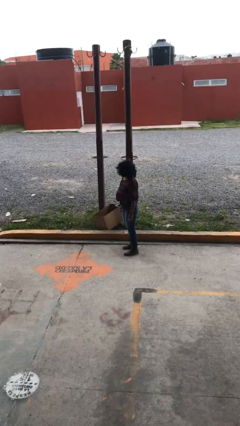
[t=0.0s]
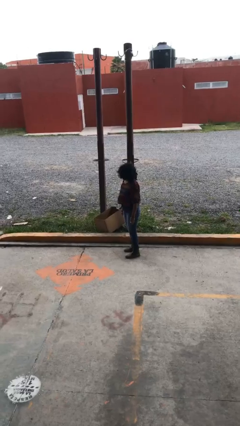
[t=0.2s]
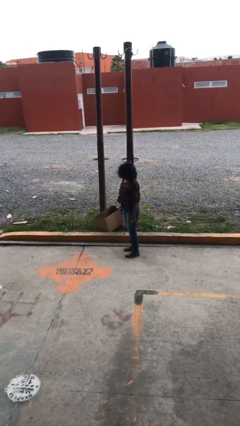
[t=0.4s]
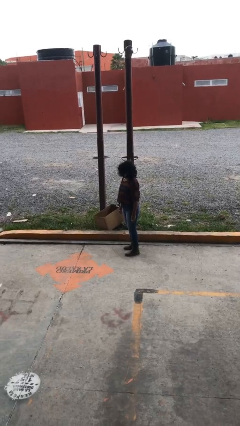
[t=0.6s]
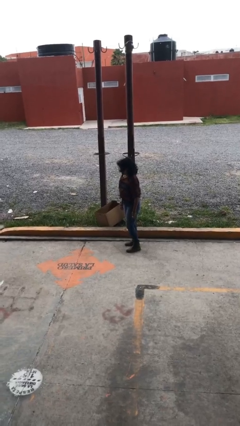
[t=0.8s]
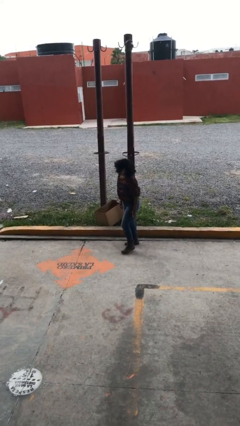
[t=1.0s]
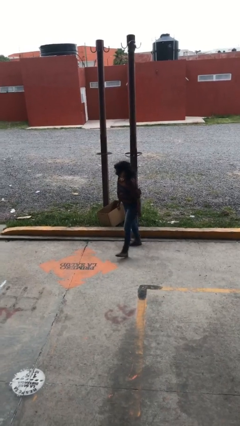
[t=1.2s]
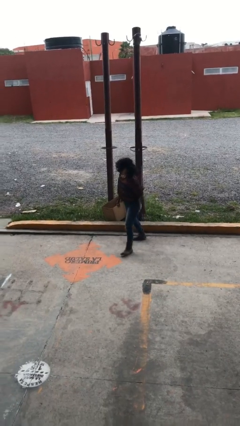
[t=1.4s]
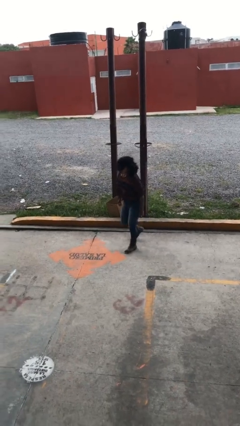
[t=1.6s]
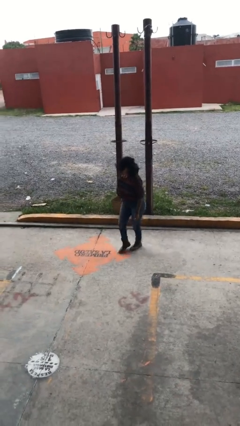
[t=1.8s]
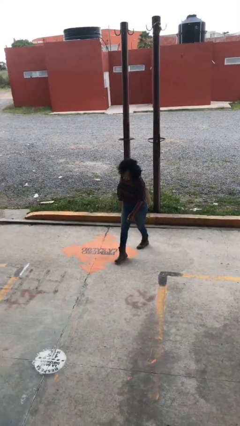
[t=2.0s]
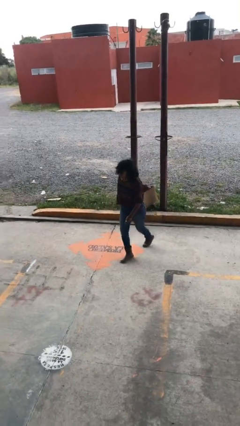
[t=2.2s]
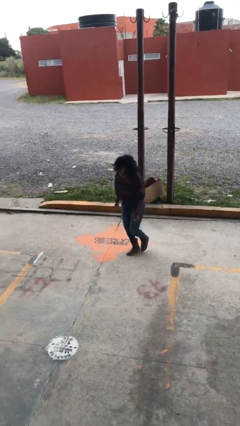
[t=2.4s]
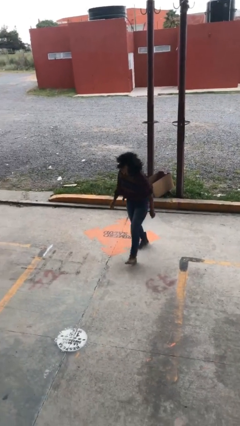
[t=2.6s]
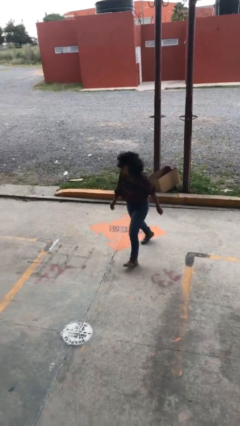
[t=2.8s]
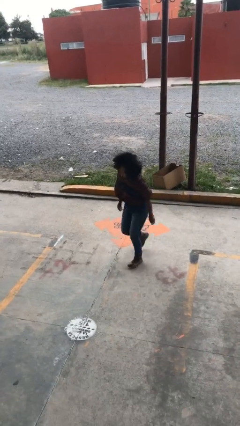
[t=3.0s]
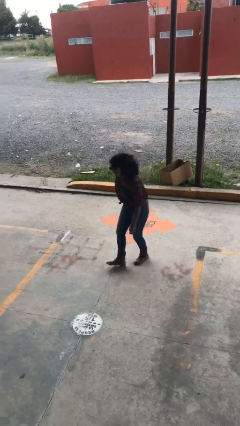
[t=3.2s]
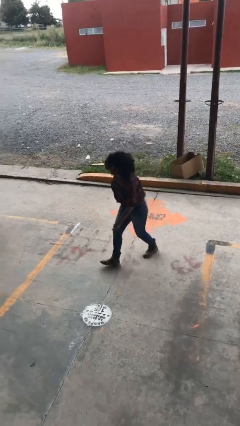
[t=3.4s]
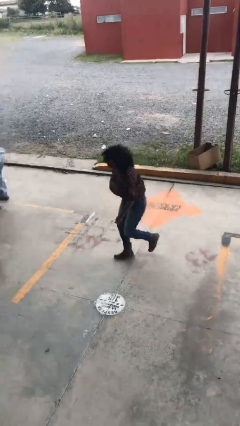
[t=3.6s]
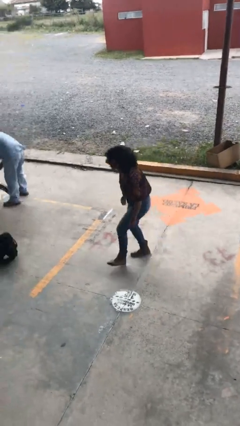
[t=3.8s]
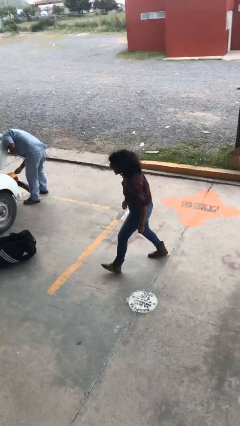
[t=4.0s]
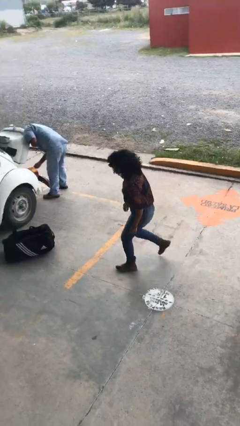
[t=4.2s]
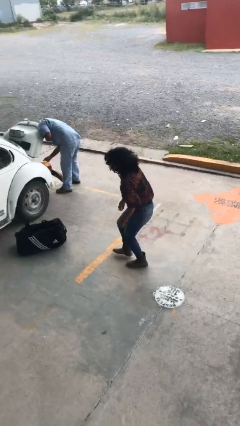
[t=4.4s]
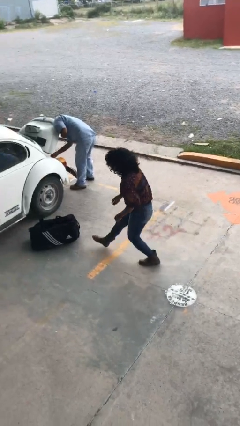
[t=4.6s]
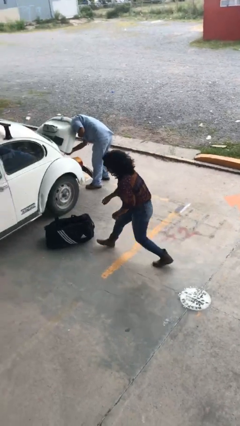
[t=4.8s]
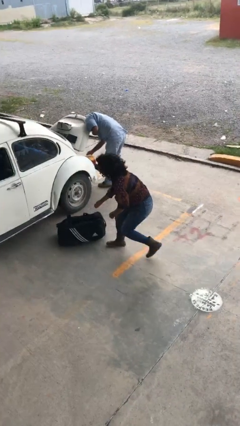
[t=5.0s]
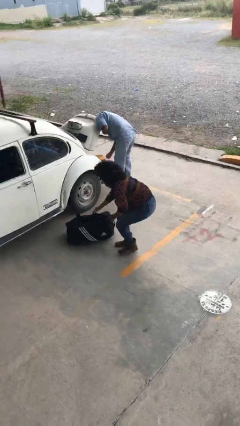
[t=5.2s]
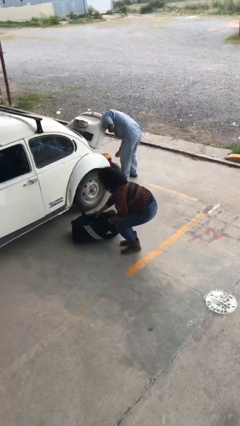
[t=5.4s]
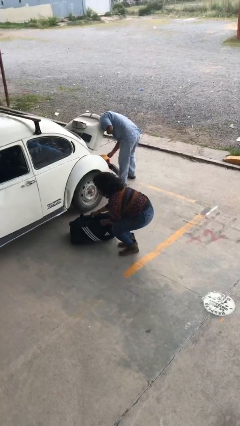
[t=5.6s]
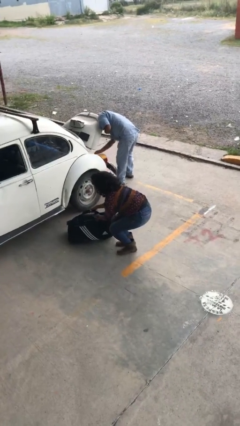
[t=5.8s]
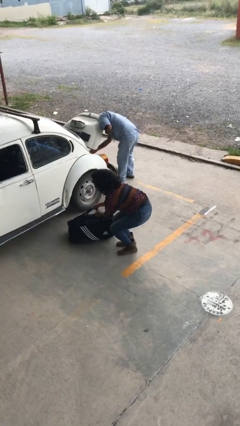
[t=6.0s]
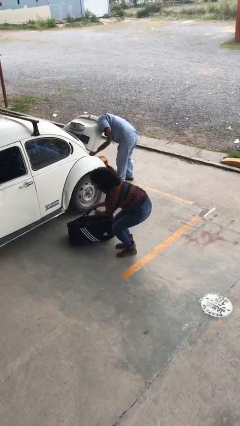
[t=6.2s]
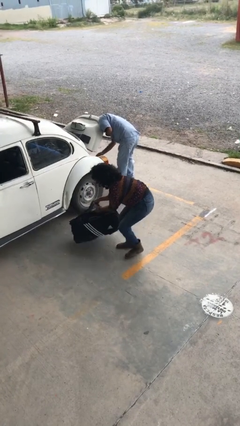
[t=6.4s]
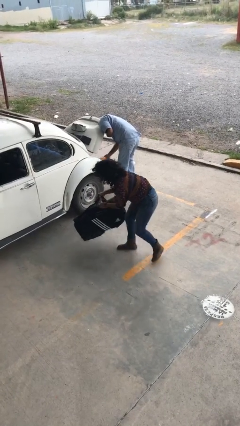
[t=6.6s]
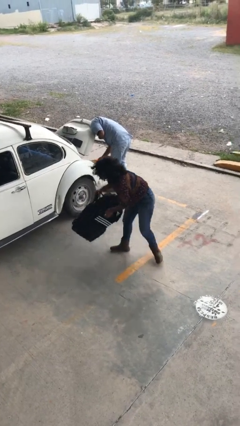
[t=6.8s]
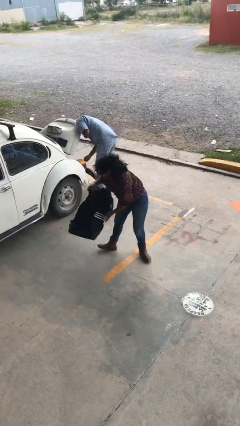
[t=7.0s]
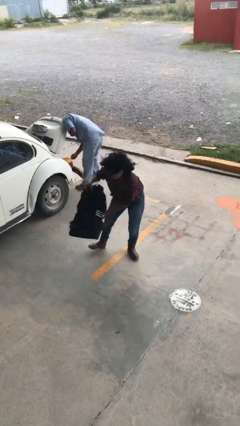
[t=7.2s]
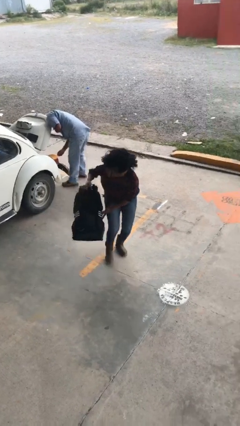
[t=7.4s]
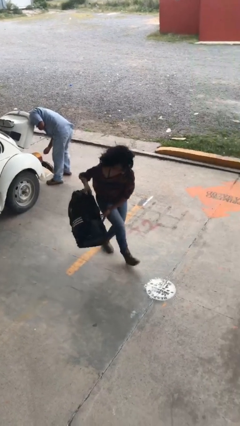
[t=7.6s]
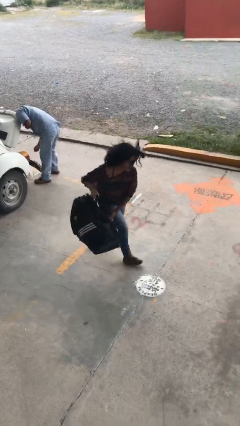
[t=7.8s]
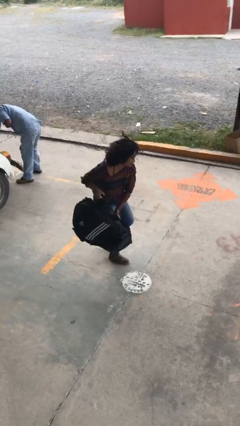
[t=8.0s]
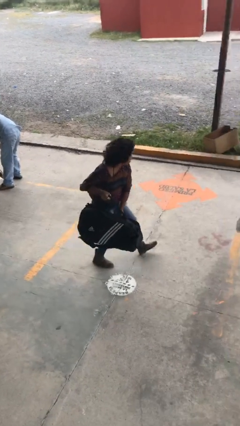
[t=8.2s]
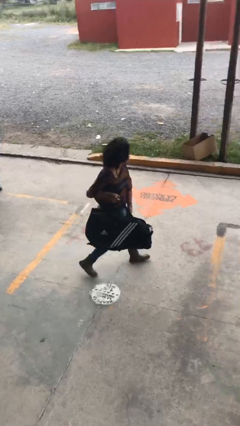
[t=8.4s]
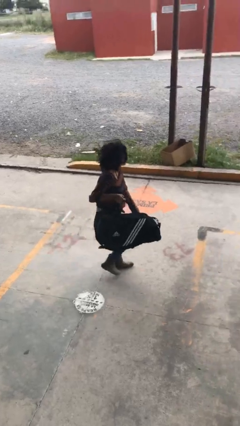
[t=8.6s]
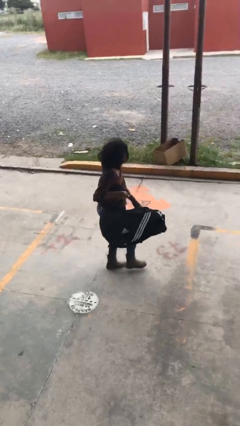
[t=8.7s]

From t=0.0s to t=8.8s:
person steals object from person

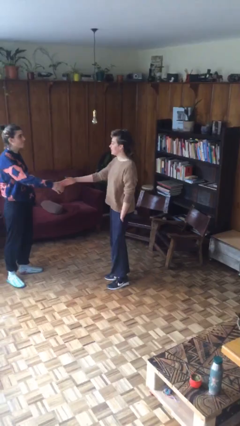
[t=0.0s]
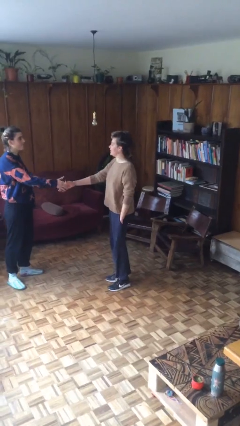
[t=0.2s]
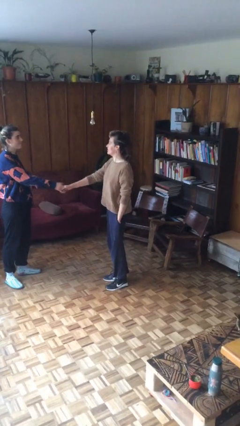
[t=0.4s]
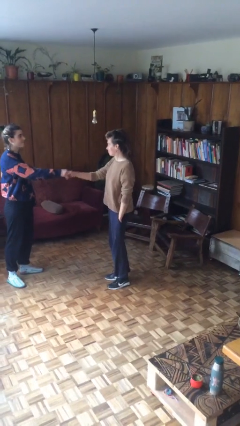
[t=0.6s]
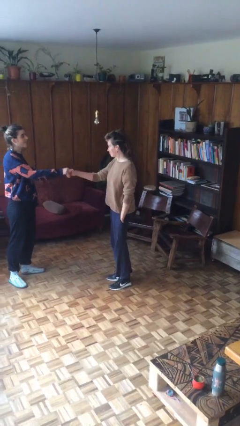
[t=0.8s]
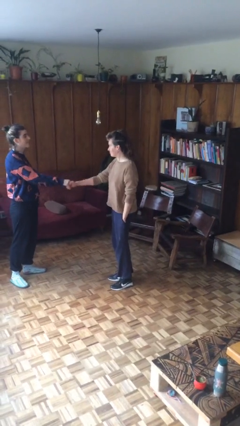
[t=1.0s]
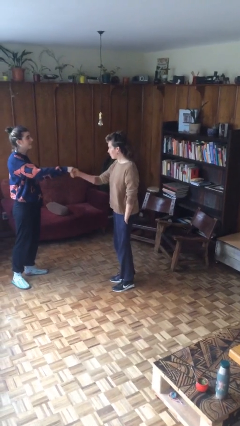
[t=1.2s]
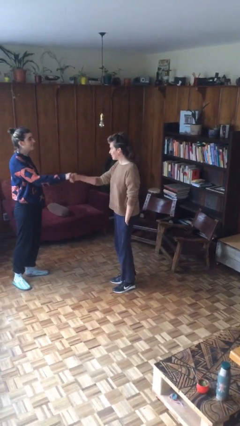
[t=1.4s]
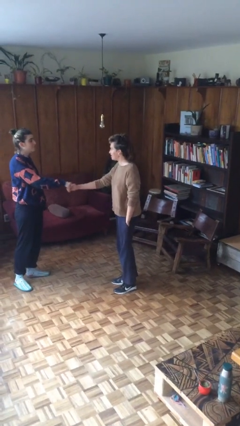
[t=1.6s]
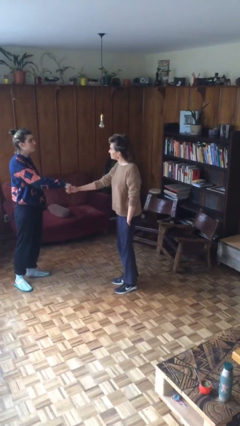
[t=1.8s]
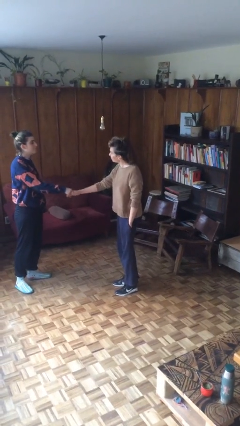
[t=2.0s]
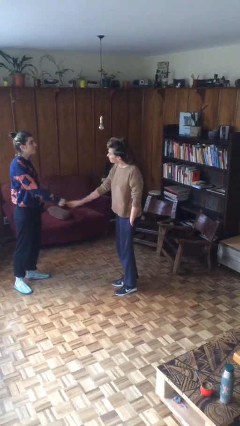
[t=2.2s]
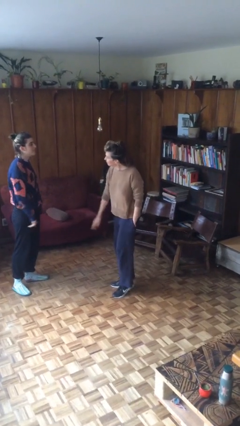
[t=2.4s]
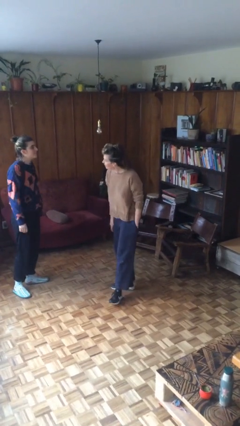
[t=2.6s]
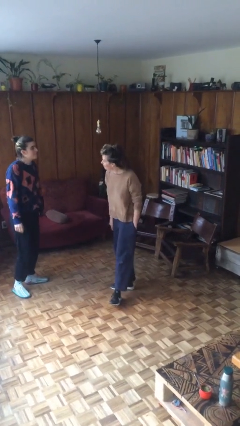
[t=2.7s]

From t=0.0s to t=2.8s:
person shakes hand

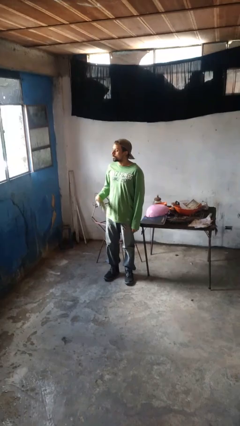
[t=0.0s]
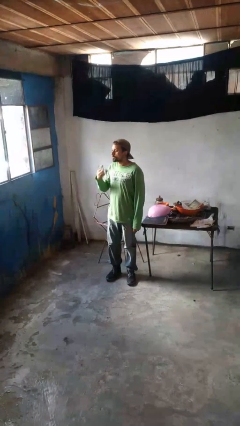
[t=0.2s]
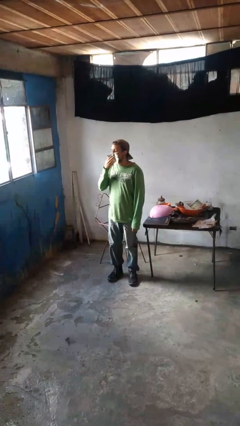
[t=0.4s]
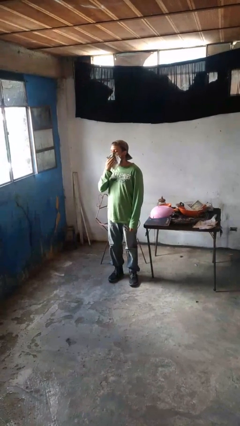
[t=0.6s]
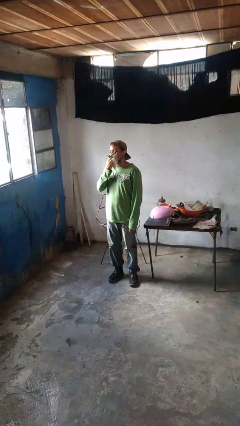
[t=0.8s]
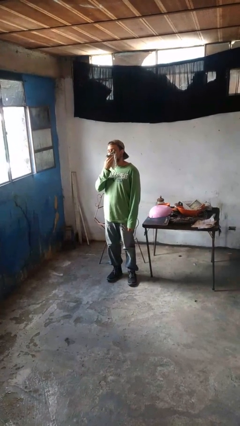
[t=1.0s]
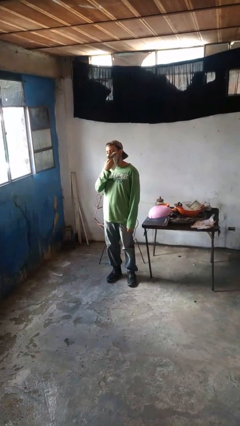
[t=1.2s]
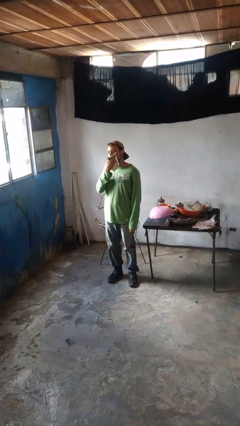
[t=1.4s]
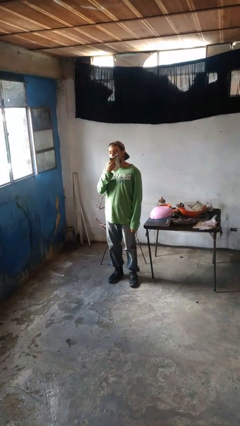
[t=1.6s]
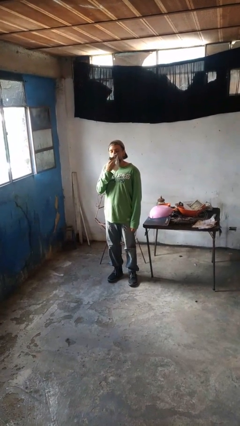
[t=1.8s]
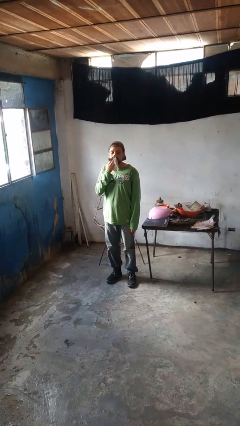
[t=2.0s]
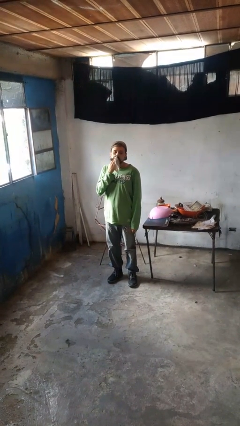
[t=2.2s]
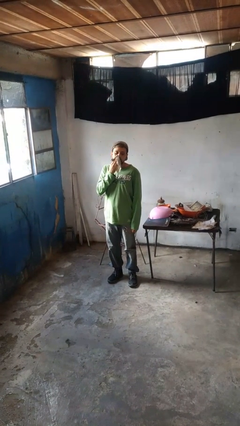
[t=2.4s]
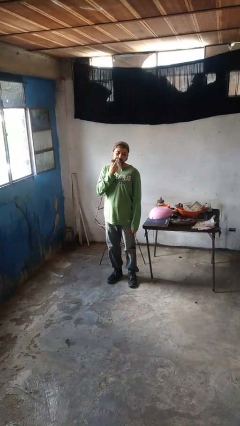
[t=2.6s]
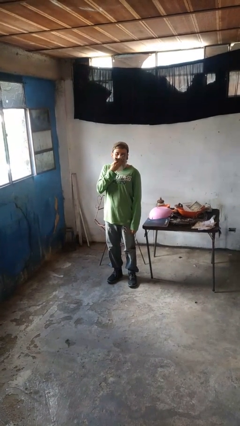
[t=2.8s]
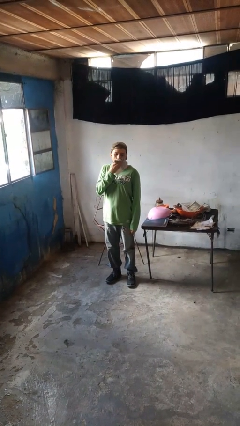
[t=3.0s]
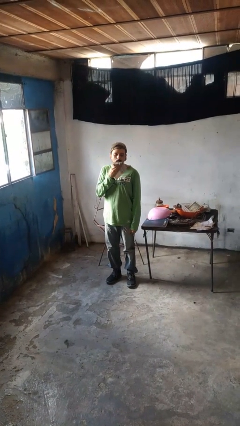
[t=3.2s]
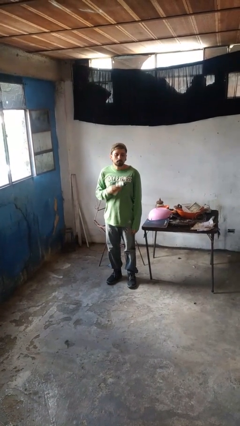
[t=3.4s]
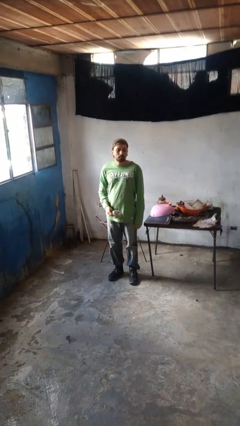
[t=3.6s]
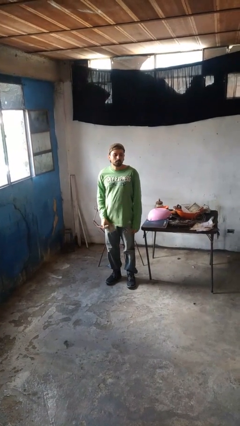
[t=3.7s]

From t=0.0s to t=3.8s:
person wipes mouth with napkin

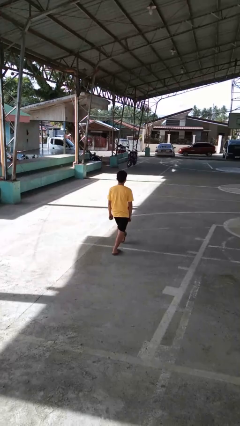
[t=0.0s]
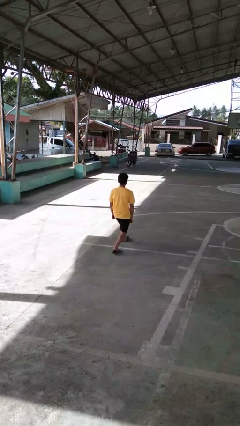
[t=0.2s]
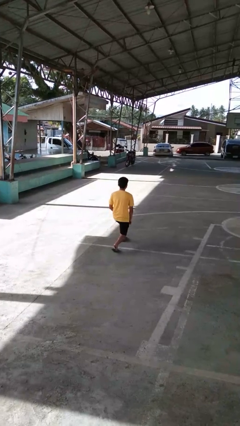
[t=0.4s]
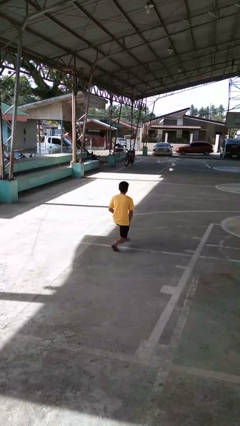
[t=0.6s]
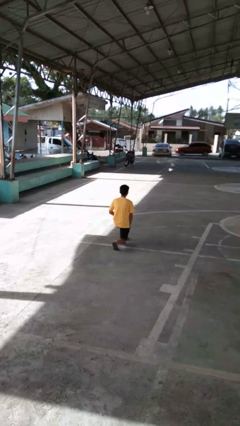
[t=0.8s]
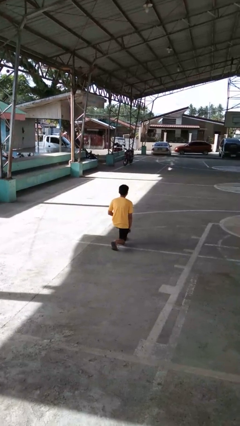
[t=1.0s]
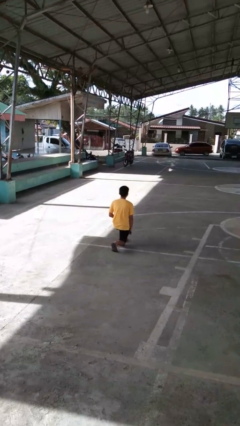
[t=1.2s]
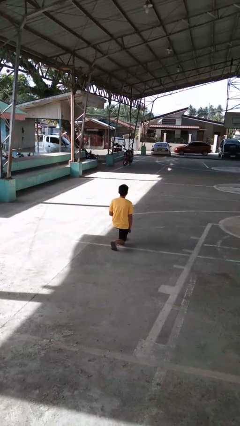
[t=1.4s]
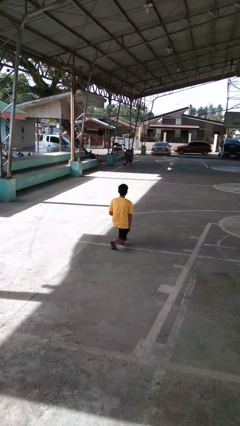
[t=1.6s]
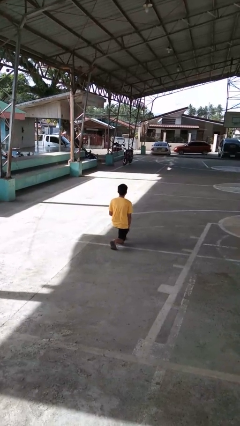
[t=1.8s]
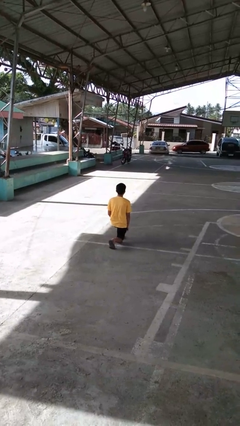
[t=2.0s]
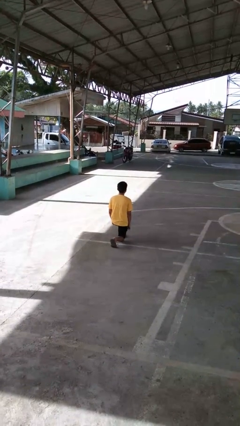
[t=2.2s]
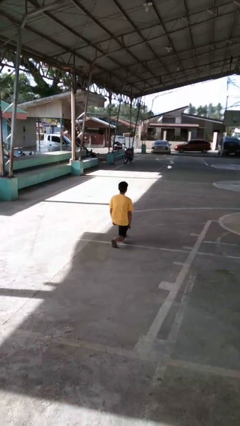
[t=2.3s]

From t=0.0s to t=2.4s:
person kneels
